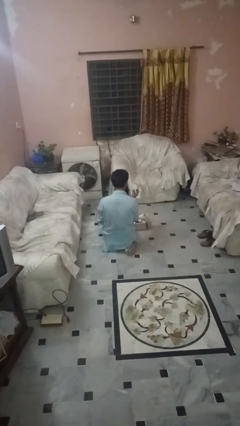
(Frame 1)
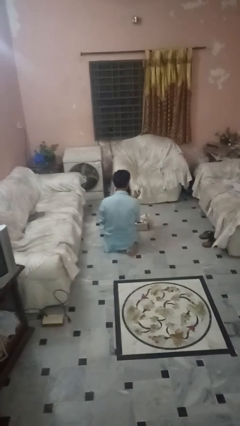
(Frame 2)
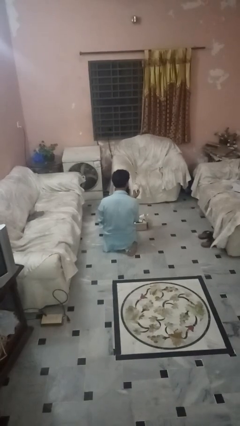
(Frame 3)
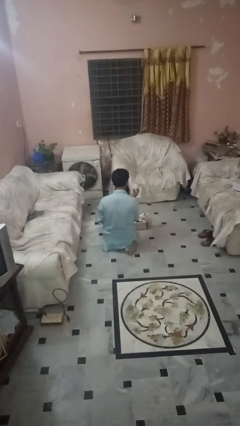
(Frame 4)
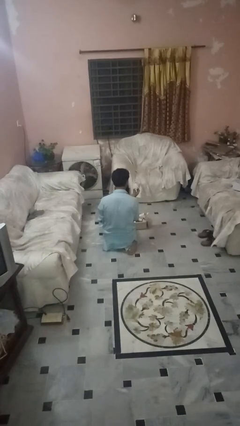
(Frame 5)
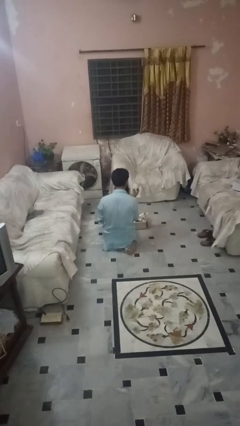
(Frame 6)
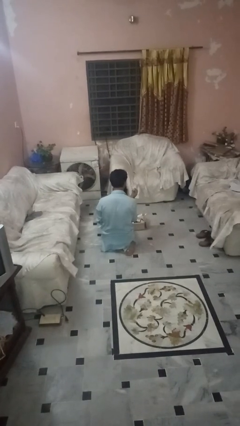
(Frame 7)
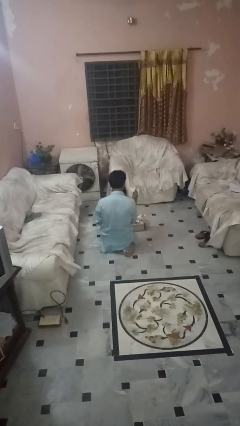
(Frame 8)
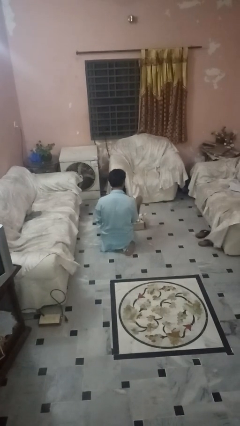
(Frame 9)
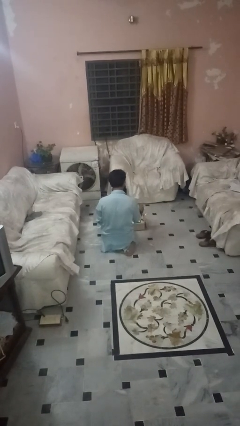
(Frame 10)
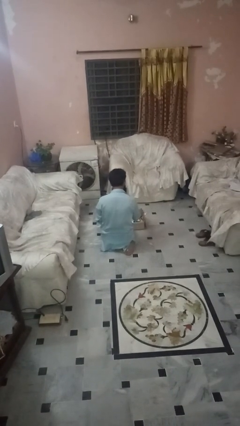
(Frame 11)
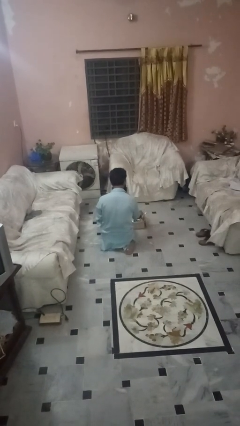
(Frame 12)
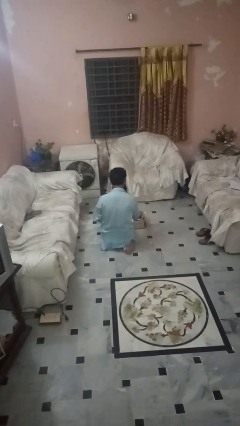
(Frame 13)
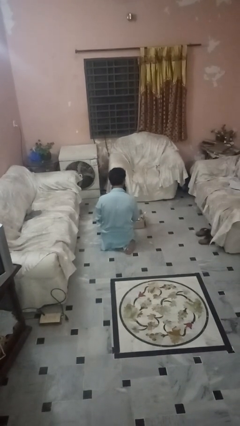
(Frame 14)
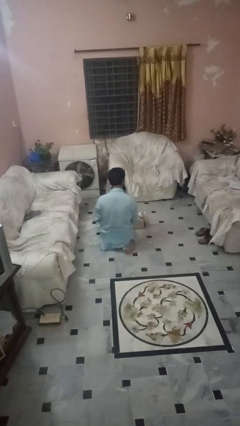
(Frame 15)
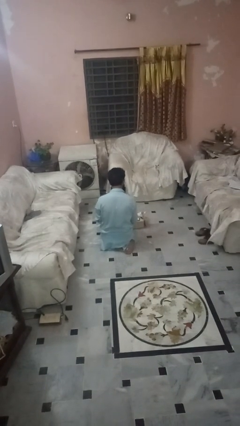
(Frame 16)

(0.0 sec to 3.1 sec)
person puts object into box

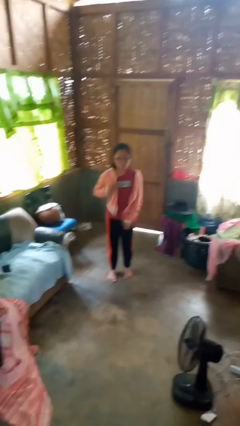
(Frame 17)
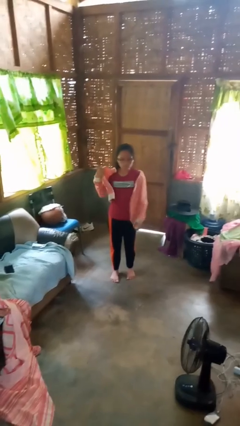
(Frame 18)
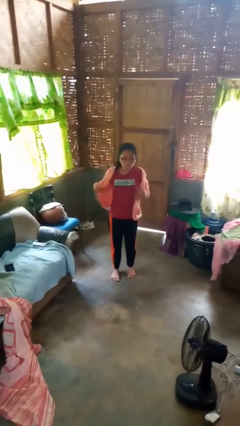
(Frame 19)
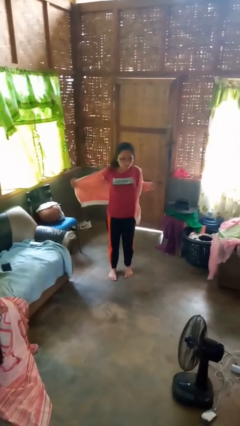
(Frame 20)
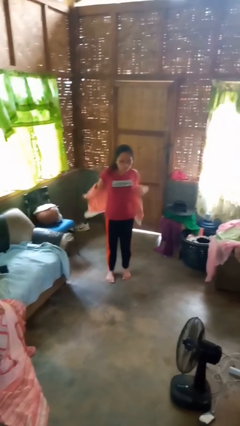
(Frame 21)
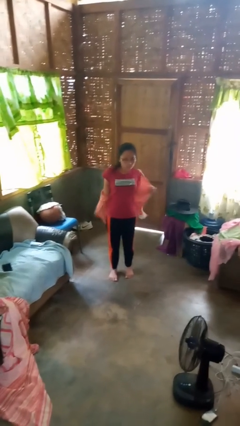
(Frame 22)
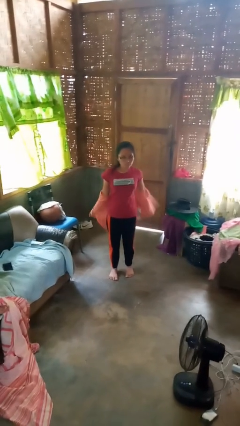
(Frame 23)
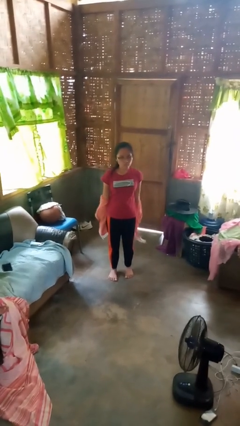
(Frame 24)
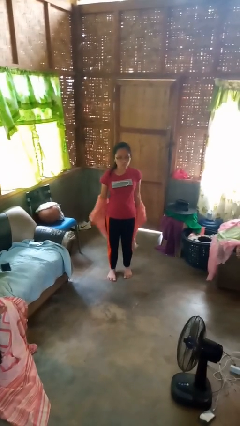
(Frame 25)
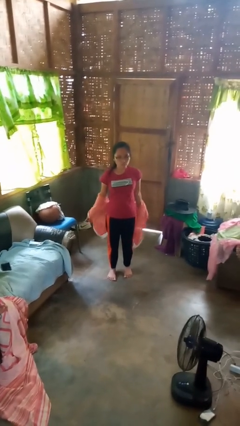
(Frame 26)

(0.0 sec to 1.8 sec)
person takes off jacket

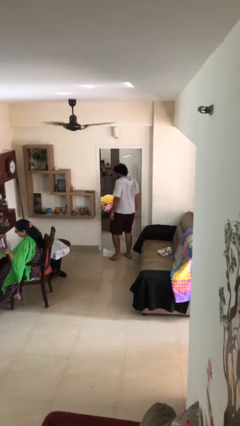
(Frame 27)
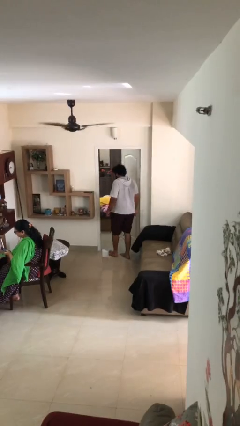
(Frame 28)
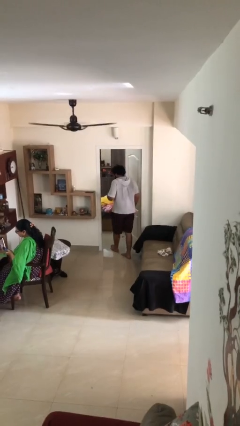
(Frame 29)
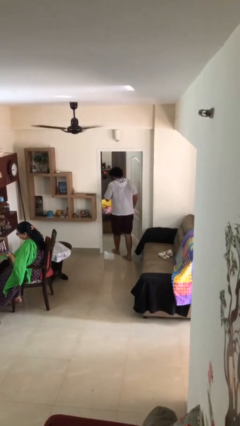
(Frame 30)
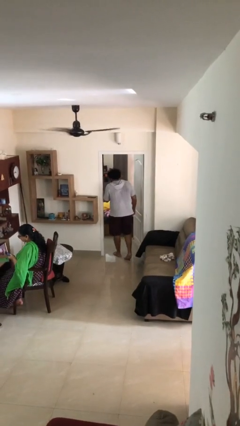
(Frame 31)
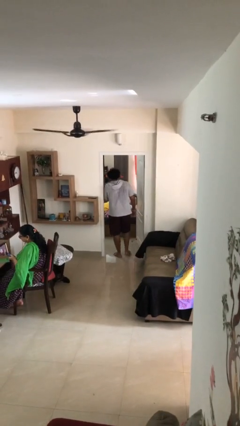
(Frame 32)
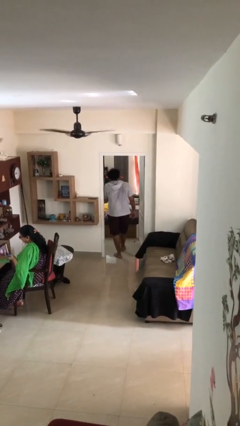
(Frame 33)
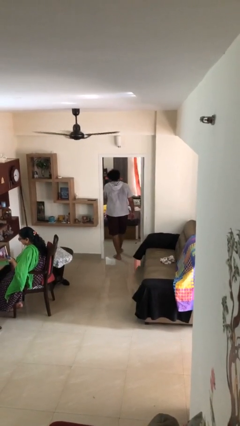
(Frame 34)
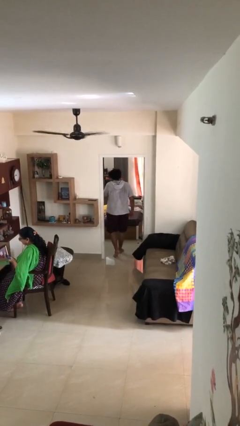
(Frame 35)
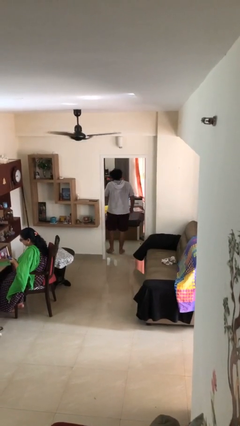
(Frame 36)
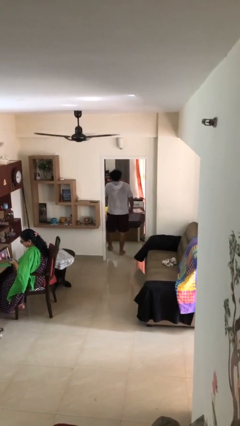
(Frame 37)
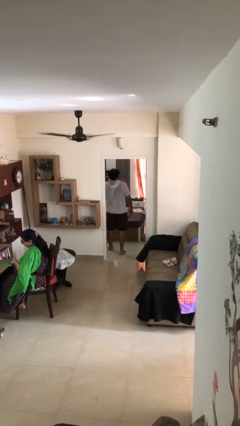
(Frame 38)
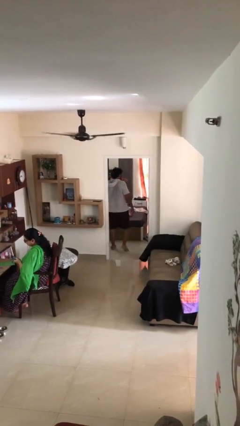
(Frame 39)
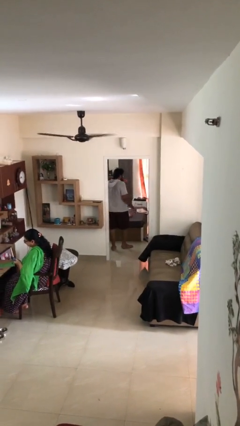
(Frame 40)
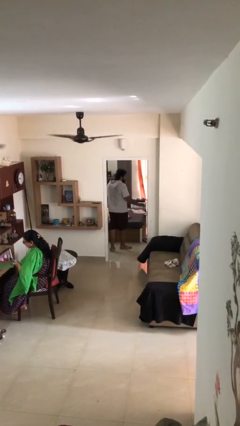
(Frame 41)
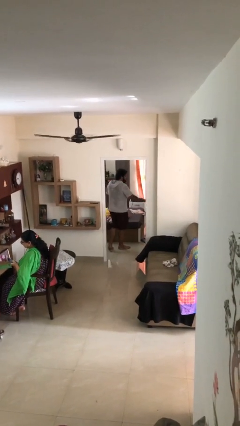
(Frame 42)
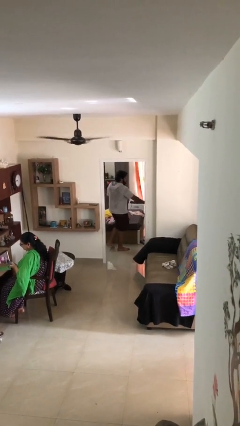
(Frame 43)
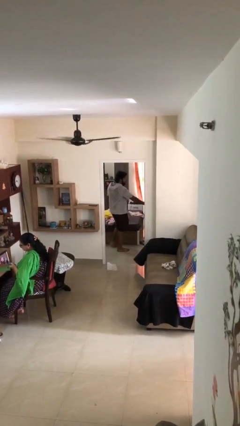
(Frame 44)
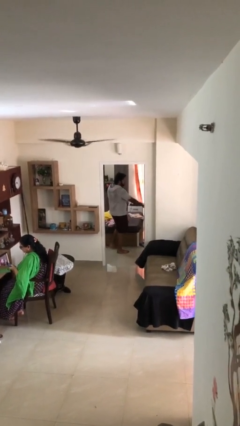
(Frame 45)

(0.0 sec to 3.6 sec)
person exits scene through structure

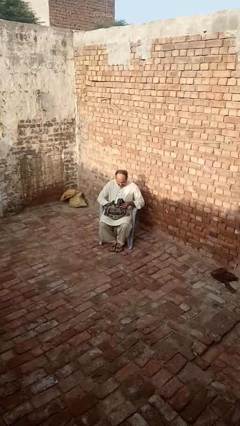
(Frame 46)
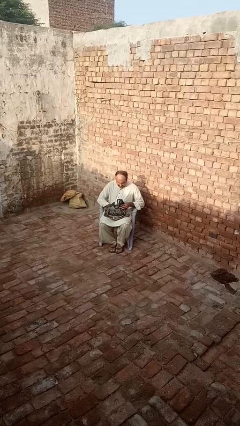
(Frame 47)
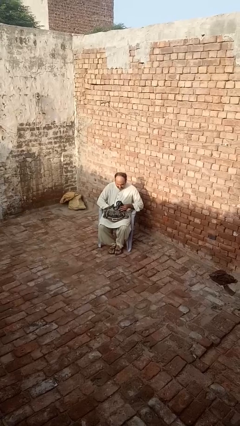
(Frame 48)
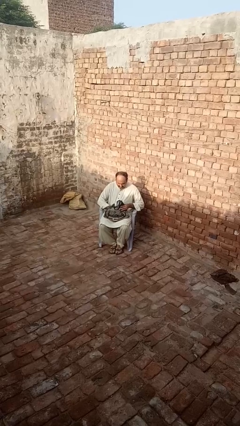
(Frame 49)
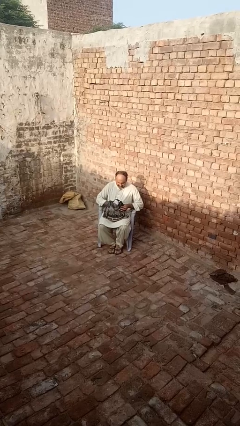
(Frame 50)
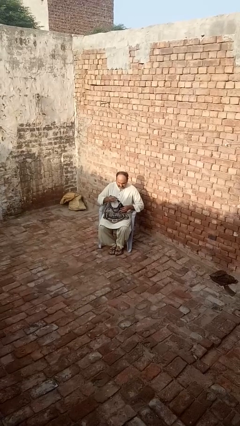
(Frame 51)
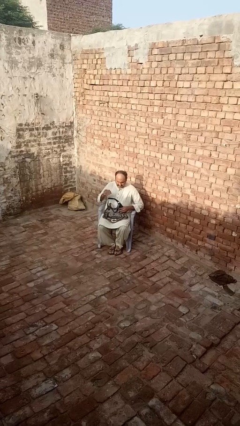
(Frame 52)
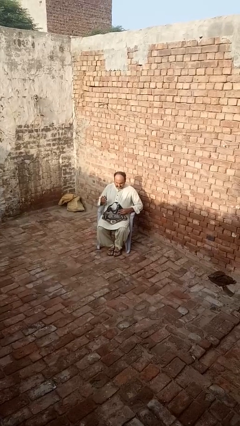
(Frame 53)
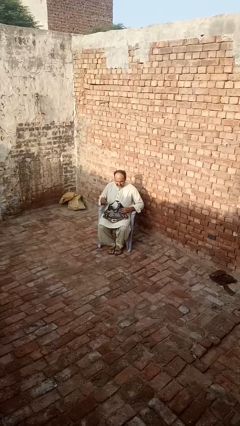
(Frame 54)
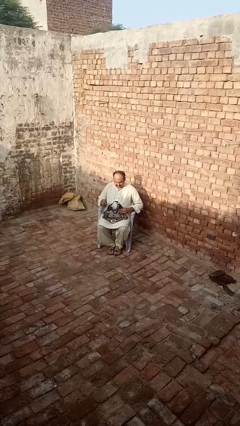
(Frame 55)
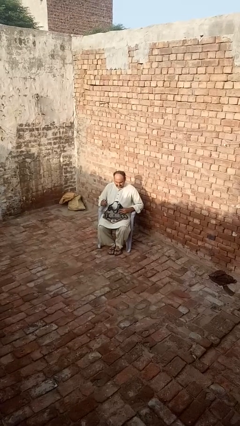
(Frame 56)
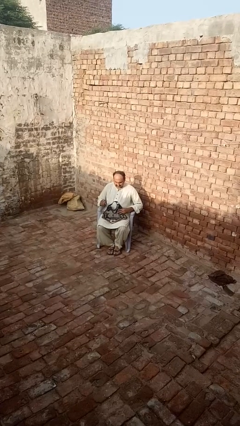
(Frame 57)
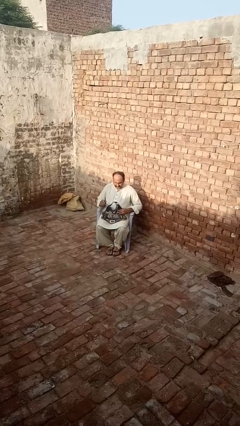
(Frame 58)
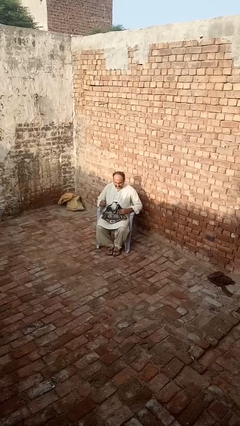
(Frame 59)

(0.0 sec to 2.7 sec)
person takes object from purse

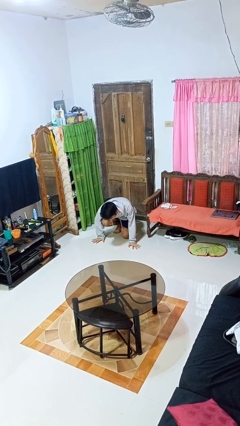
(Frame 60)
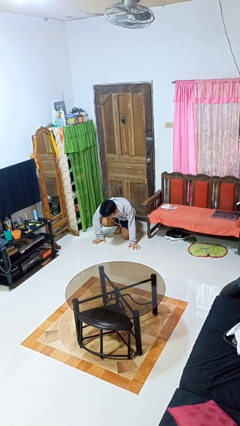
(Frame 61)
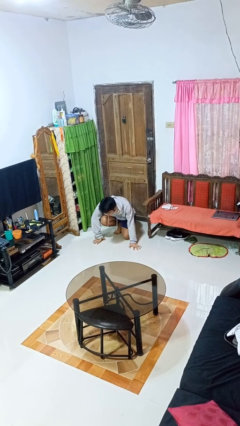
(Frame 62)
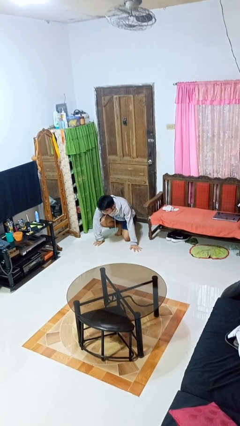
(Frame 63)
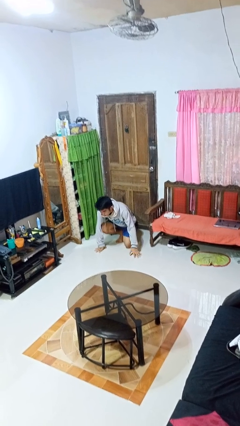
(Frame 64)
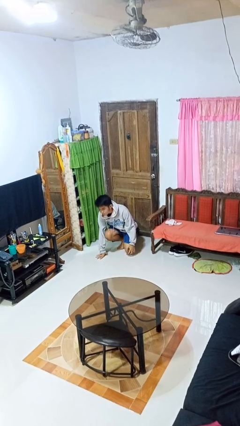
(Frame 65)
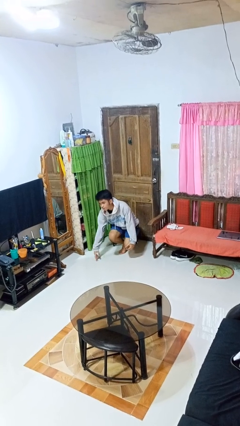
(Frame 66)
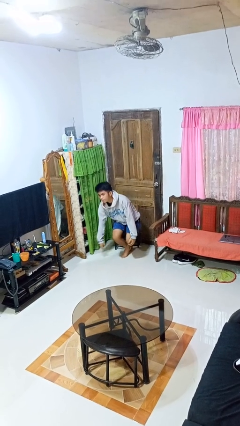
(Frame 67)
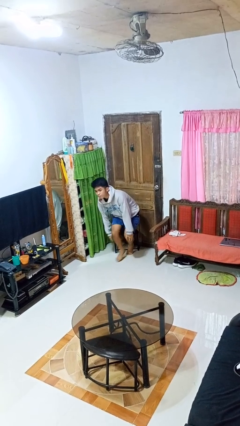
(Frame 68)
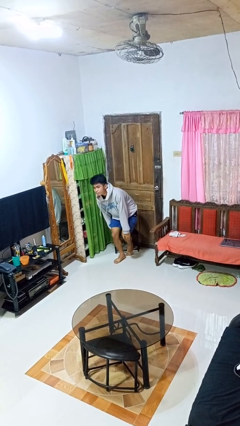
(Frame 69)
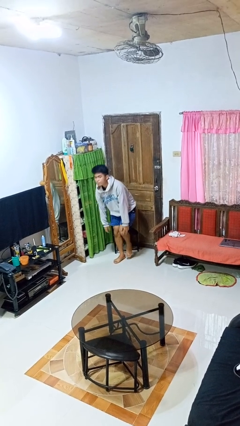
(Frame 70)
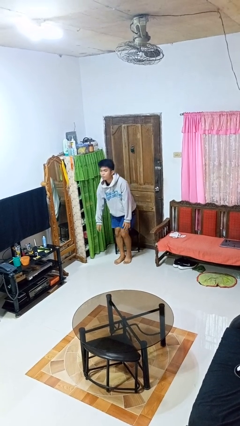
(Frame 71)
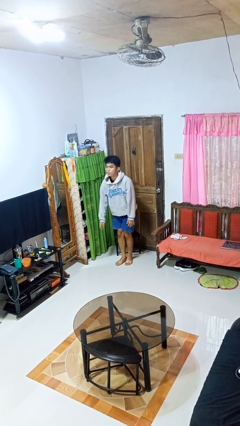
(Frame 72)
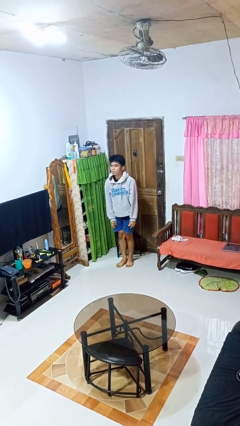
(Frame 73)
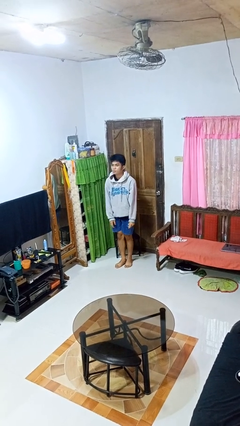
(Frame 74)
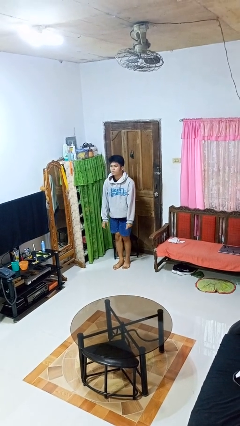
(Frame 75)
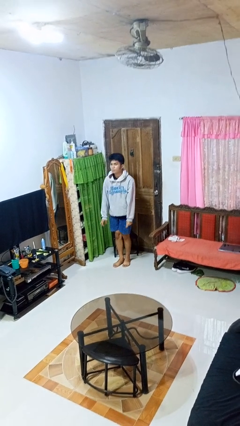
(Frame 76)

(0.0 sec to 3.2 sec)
person stands up from floor

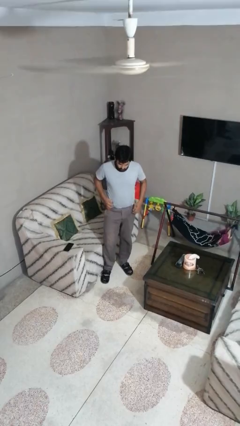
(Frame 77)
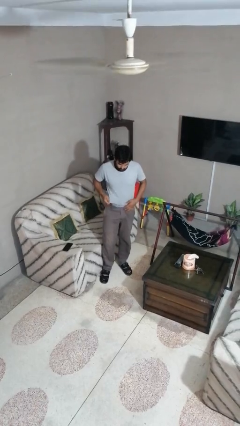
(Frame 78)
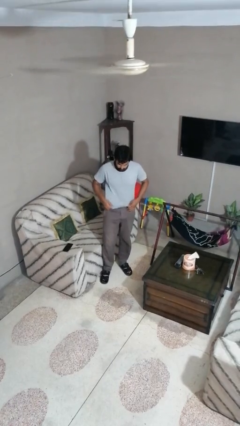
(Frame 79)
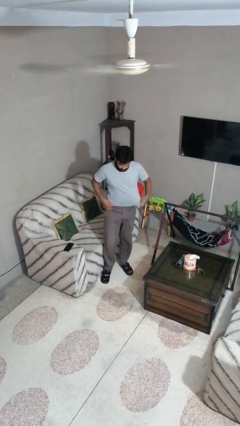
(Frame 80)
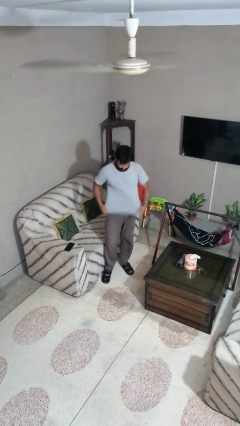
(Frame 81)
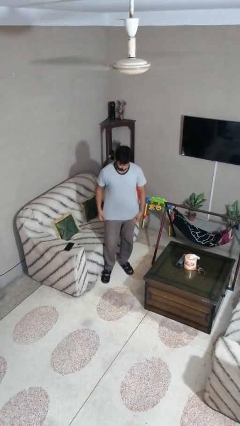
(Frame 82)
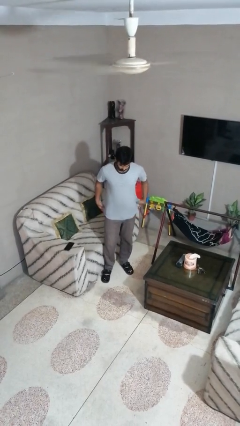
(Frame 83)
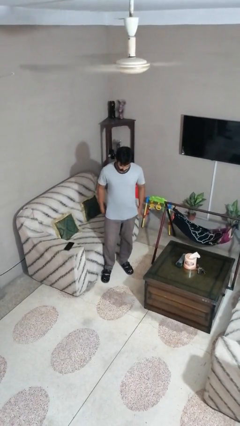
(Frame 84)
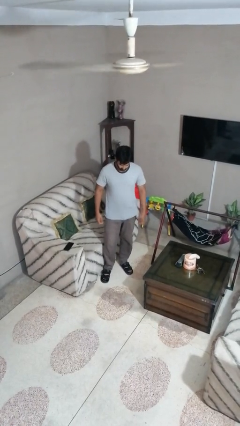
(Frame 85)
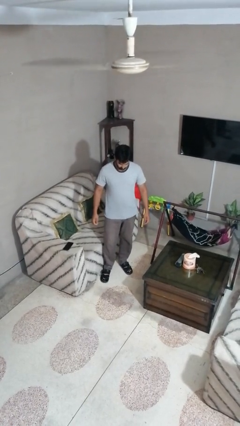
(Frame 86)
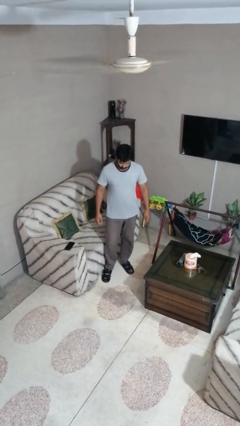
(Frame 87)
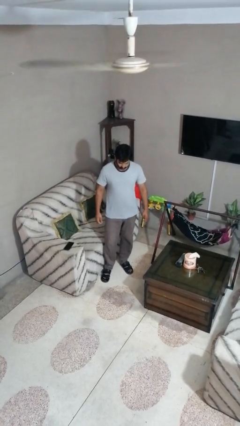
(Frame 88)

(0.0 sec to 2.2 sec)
person untucks shirt

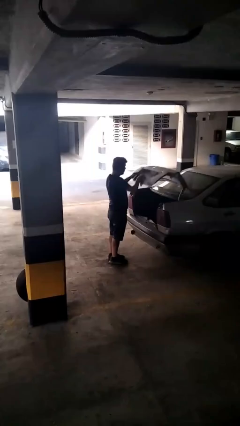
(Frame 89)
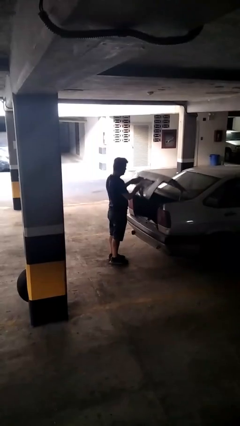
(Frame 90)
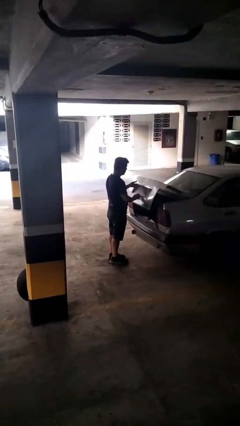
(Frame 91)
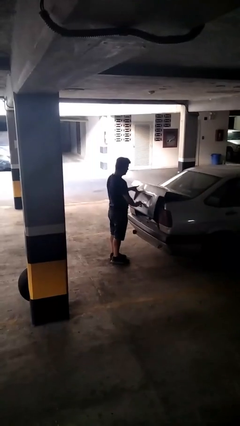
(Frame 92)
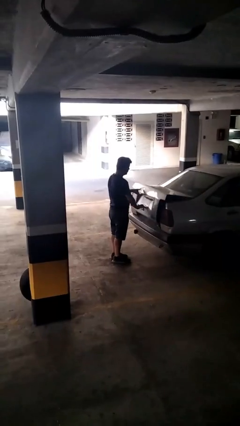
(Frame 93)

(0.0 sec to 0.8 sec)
person closes car trunk
